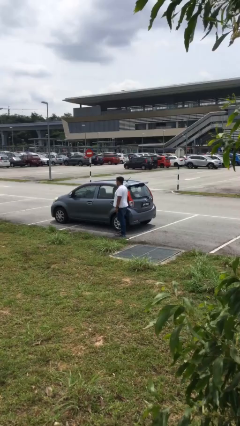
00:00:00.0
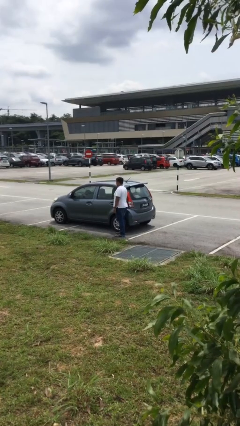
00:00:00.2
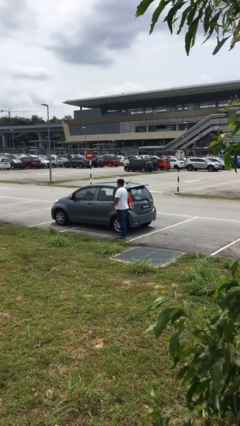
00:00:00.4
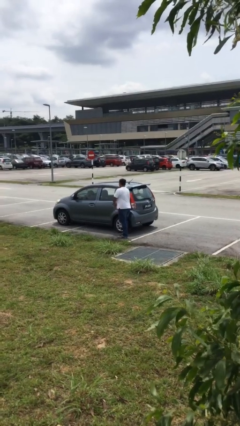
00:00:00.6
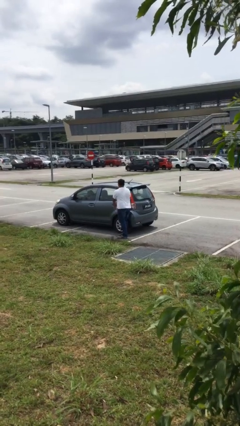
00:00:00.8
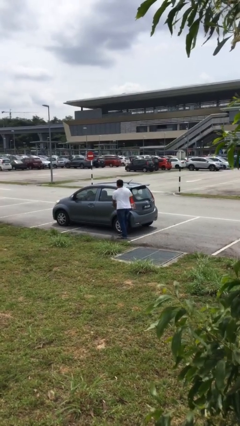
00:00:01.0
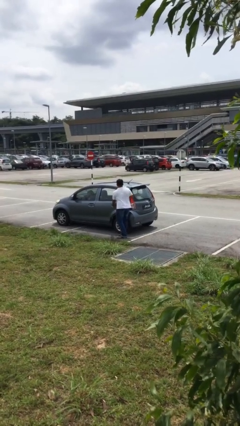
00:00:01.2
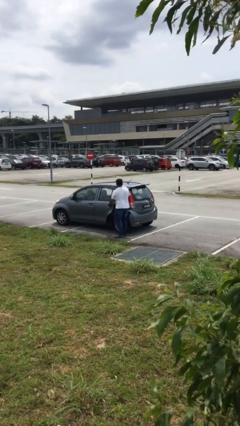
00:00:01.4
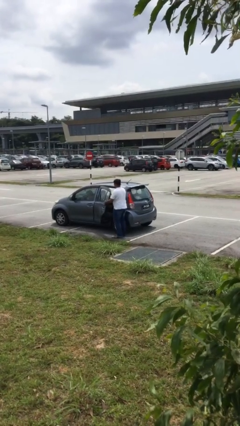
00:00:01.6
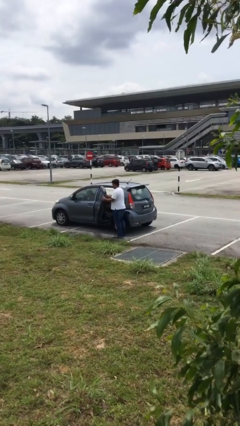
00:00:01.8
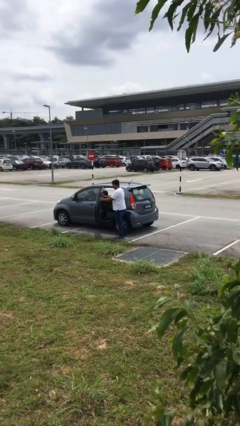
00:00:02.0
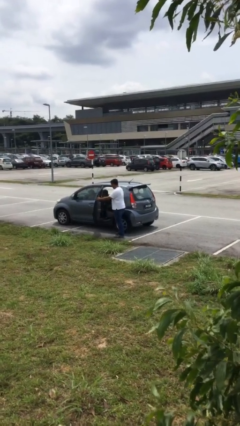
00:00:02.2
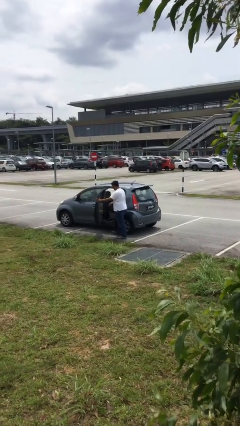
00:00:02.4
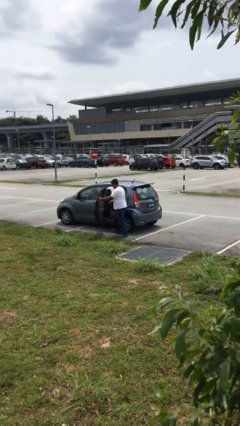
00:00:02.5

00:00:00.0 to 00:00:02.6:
person opens car door

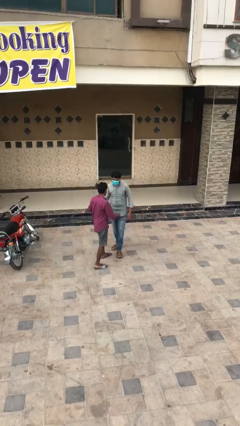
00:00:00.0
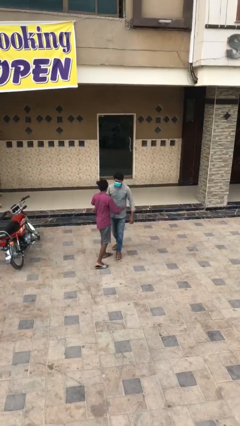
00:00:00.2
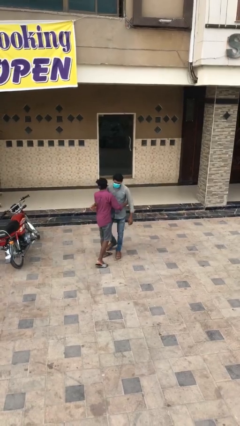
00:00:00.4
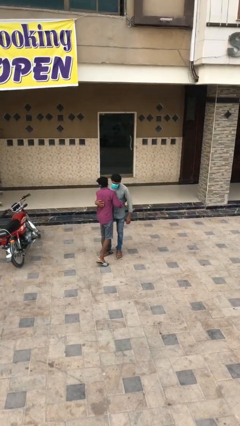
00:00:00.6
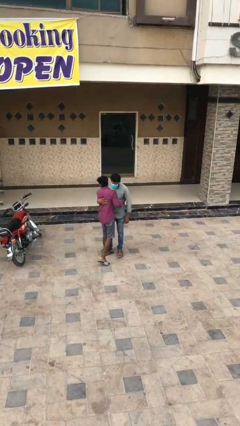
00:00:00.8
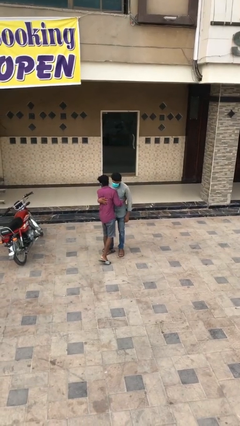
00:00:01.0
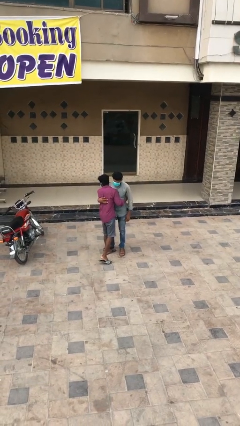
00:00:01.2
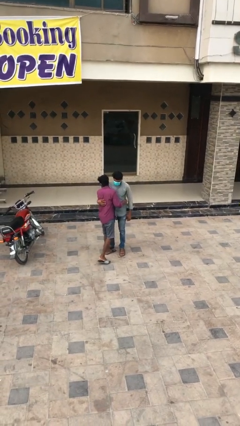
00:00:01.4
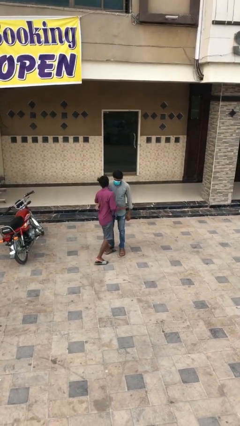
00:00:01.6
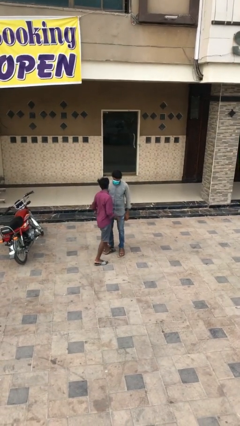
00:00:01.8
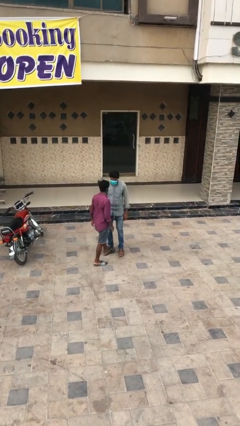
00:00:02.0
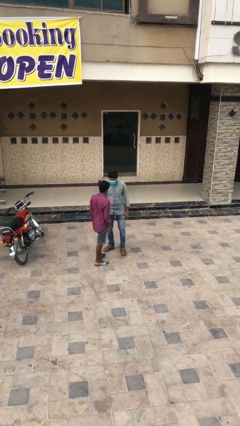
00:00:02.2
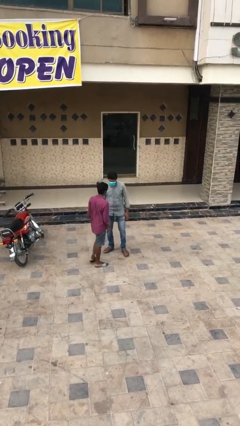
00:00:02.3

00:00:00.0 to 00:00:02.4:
person embraces person

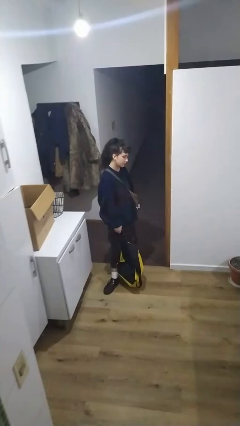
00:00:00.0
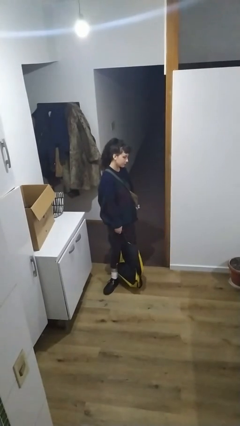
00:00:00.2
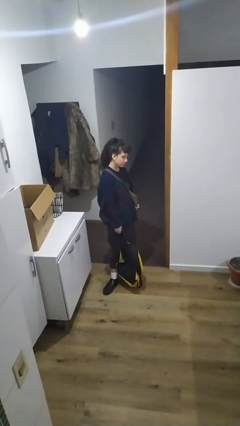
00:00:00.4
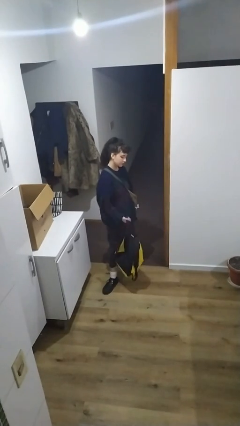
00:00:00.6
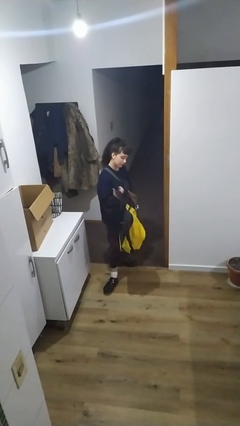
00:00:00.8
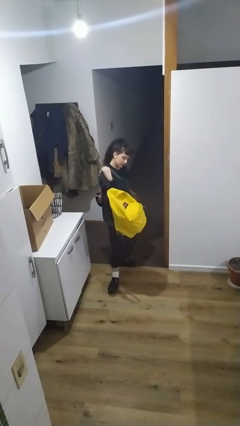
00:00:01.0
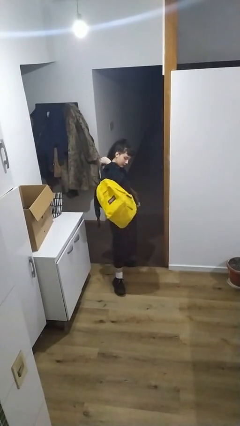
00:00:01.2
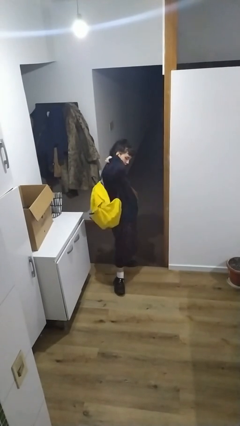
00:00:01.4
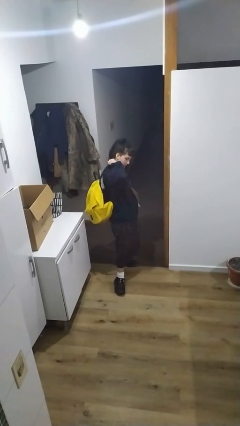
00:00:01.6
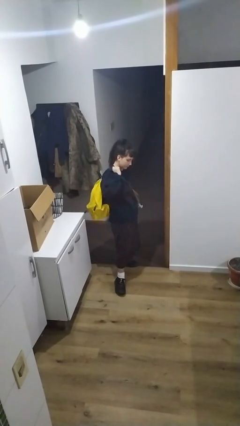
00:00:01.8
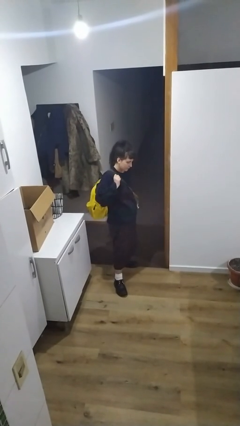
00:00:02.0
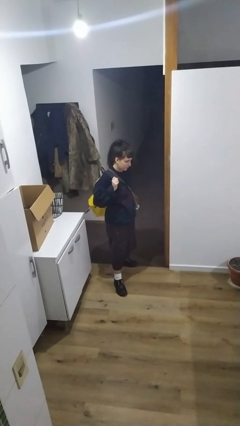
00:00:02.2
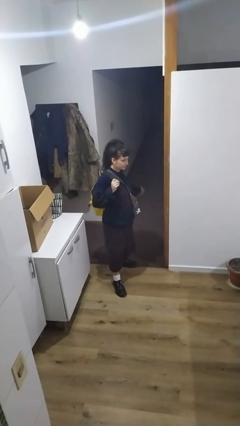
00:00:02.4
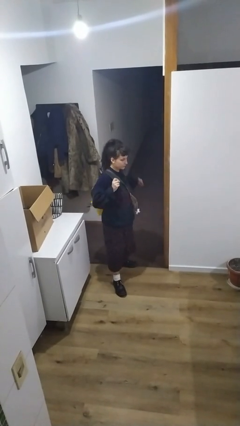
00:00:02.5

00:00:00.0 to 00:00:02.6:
person puts on backpack

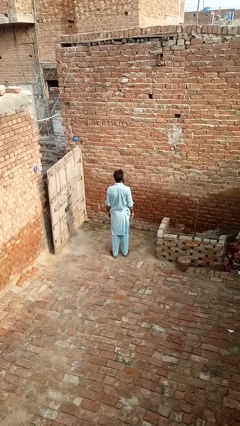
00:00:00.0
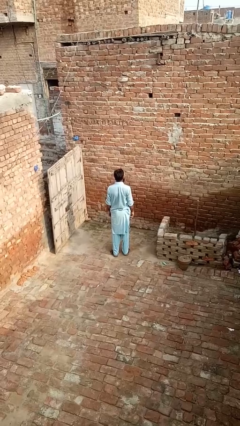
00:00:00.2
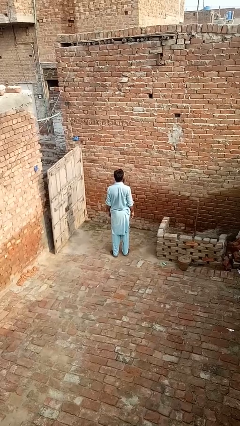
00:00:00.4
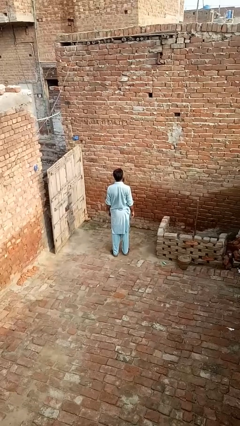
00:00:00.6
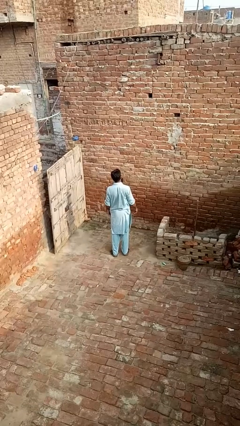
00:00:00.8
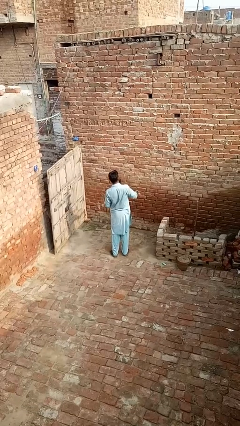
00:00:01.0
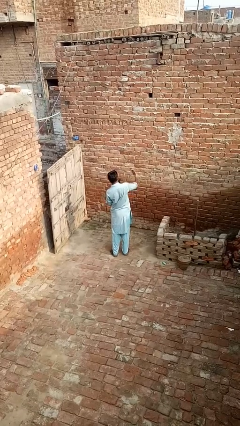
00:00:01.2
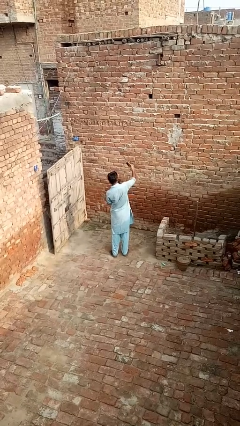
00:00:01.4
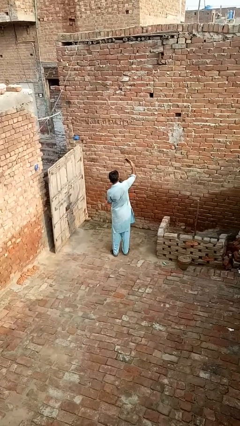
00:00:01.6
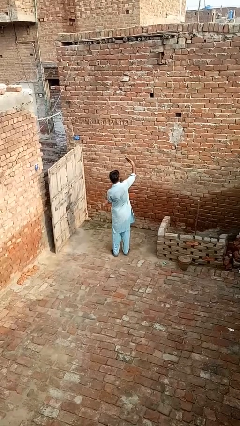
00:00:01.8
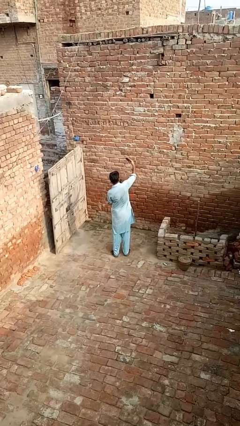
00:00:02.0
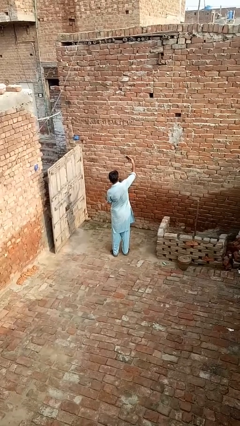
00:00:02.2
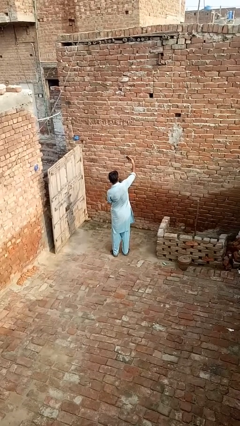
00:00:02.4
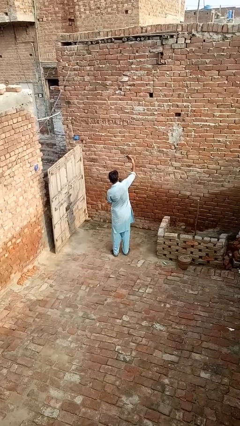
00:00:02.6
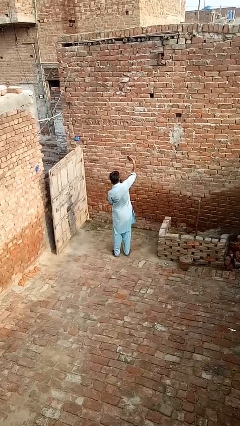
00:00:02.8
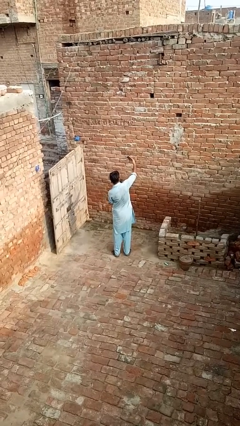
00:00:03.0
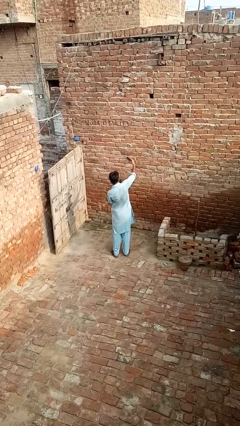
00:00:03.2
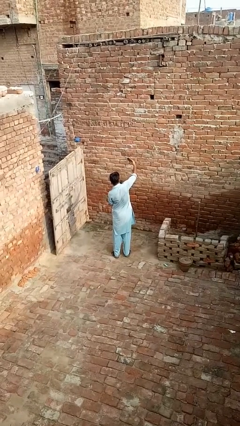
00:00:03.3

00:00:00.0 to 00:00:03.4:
person takes selfie

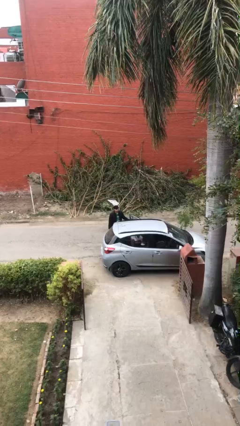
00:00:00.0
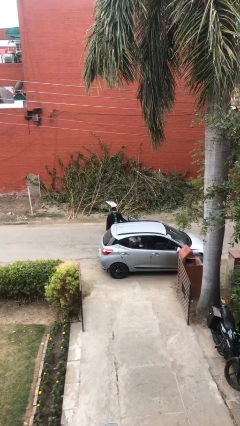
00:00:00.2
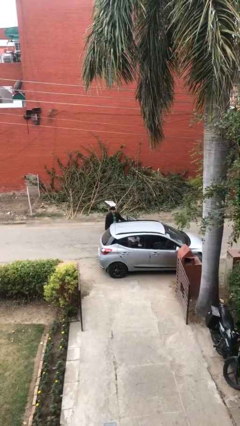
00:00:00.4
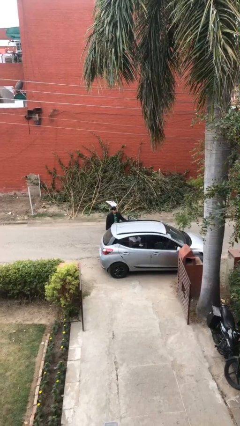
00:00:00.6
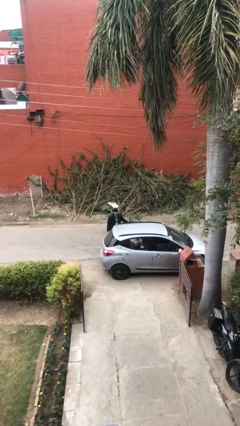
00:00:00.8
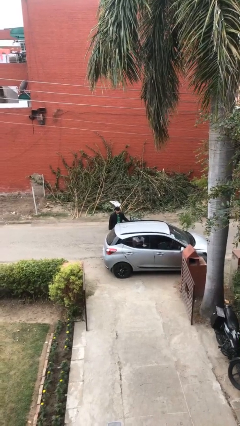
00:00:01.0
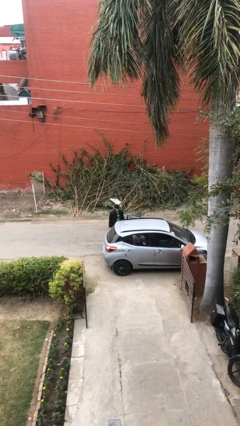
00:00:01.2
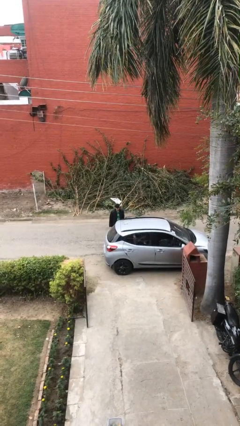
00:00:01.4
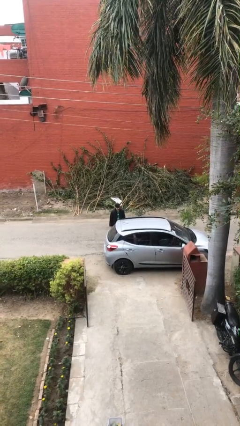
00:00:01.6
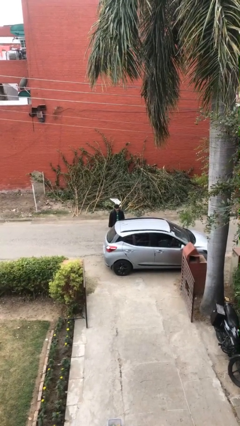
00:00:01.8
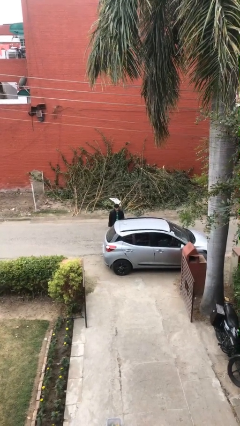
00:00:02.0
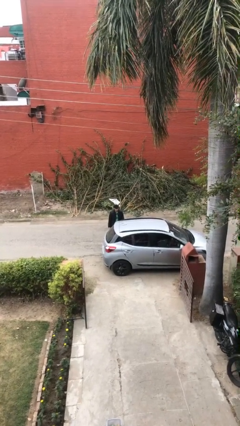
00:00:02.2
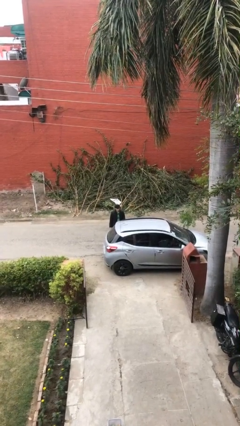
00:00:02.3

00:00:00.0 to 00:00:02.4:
person closes car door

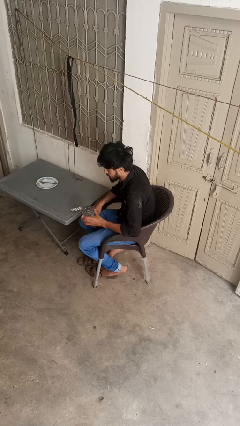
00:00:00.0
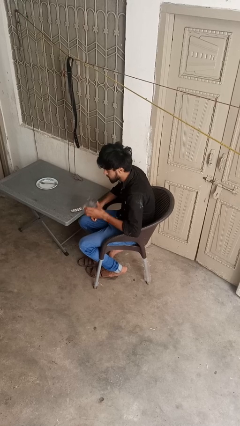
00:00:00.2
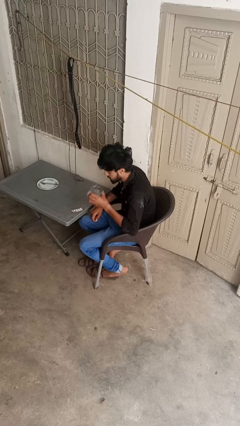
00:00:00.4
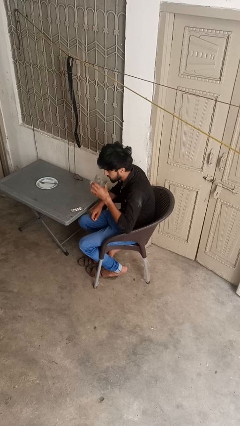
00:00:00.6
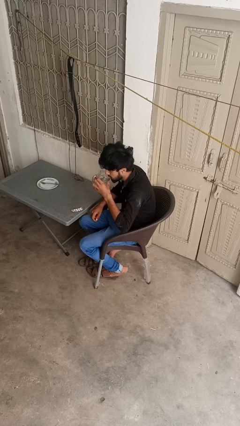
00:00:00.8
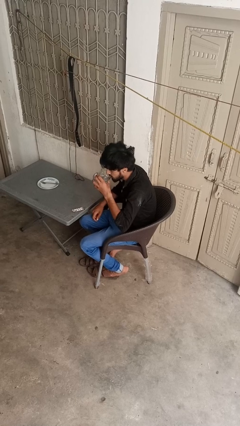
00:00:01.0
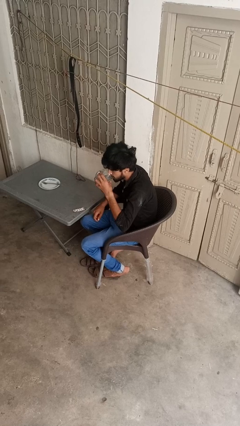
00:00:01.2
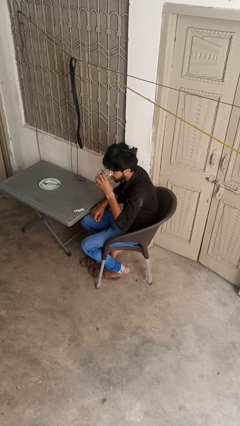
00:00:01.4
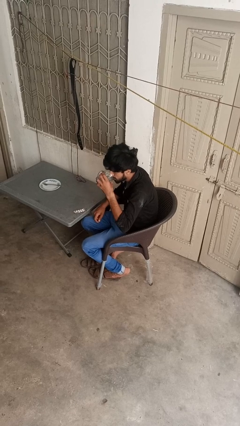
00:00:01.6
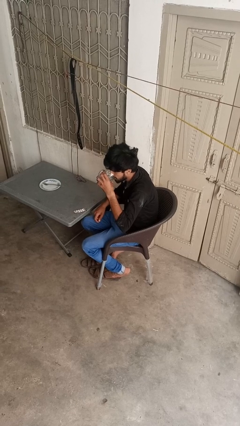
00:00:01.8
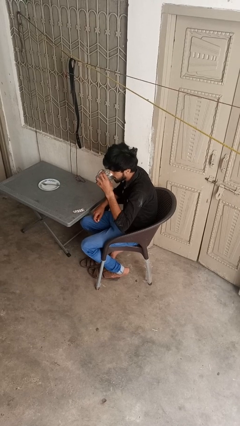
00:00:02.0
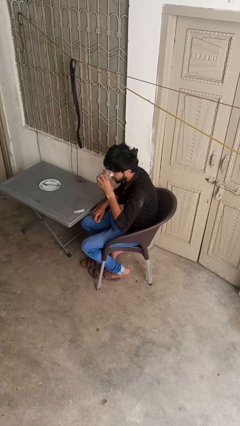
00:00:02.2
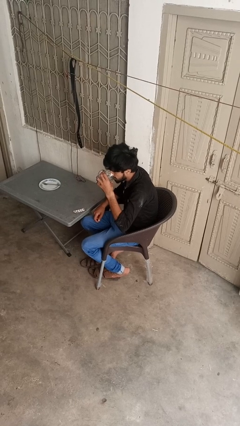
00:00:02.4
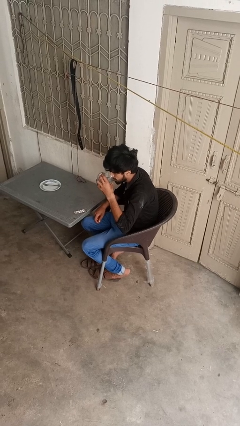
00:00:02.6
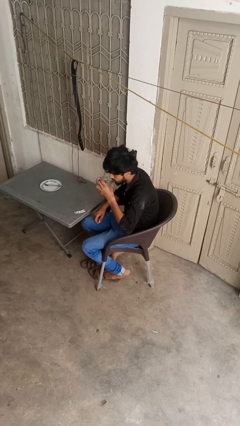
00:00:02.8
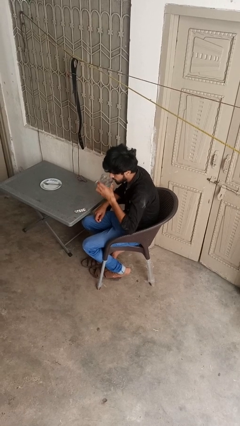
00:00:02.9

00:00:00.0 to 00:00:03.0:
person drinks from cup

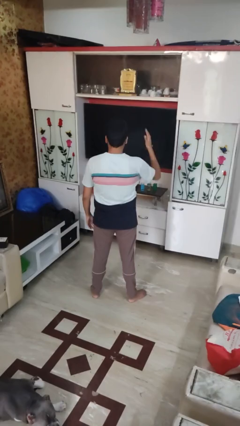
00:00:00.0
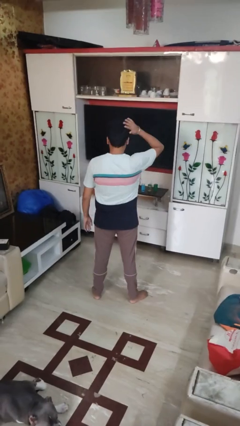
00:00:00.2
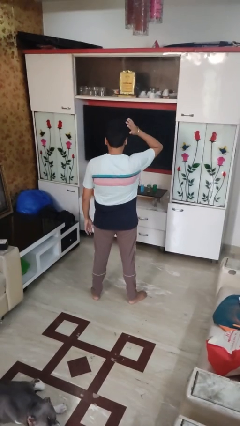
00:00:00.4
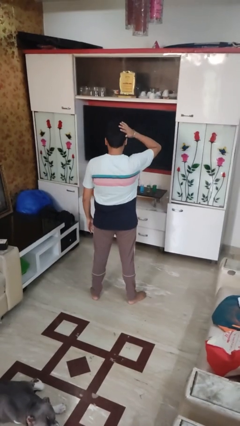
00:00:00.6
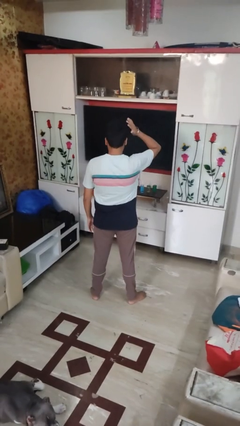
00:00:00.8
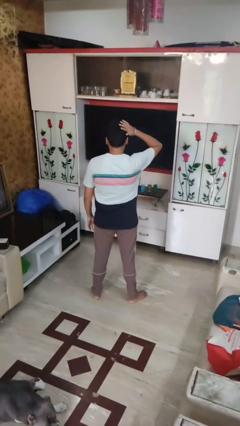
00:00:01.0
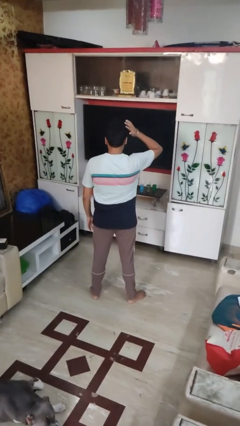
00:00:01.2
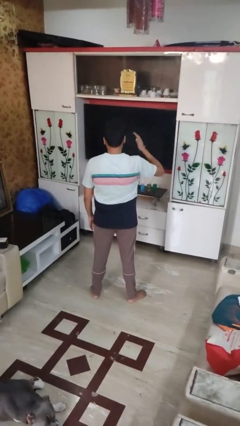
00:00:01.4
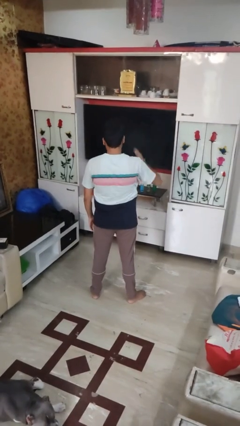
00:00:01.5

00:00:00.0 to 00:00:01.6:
person pats head
